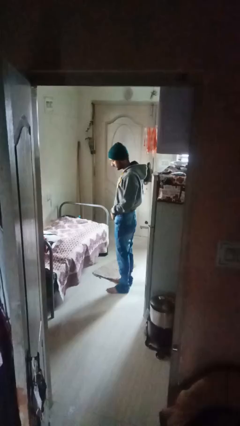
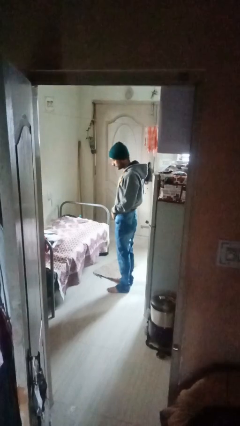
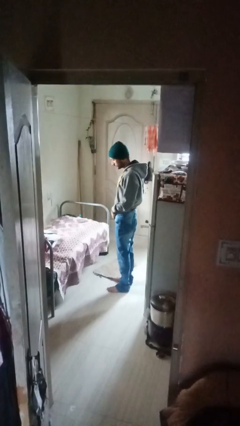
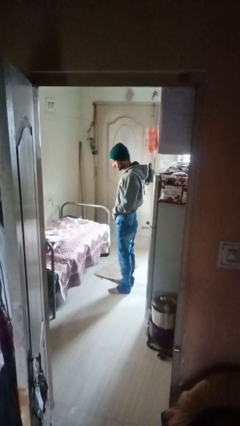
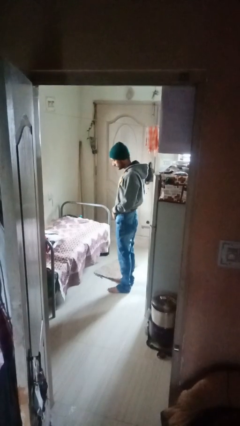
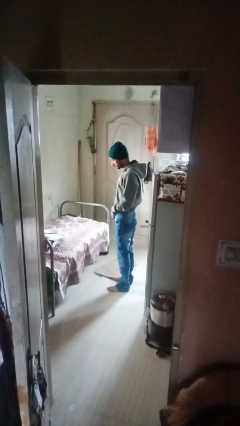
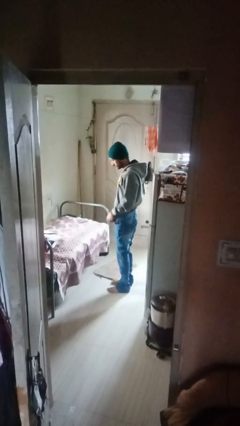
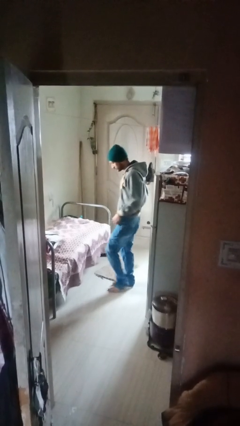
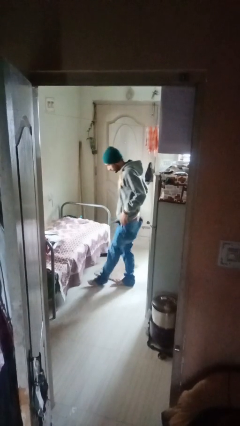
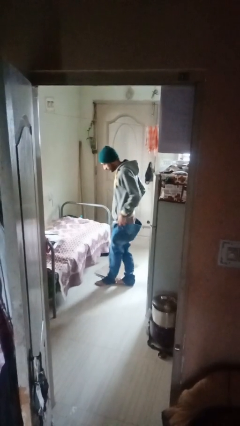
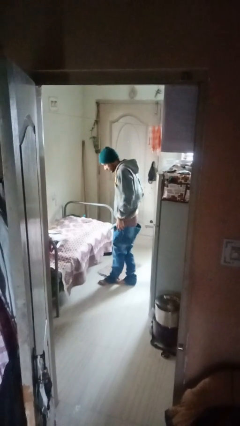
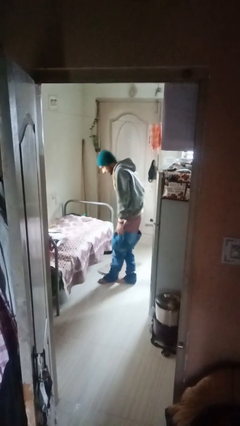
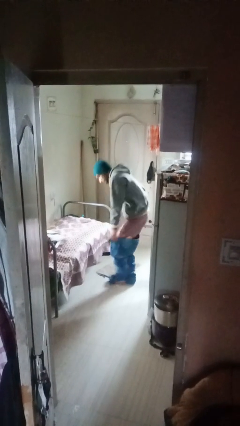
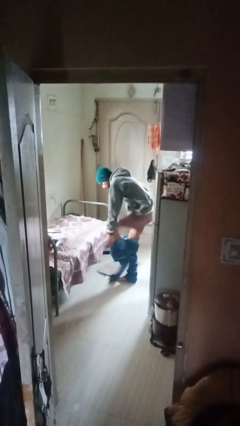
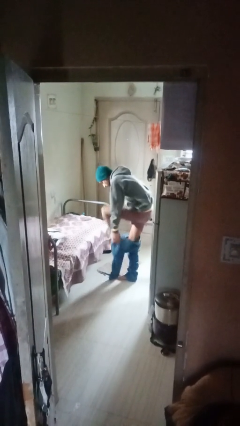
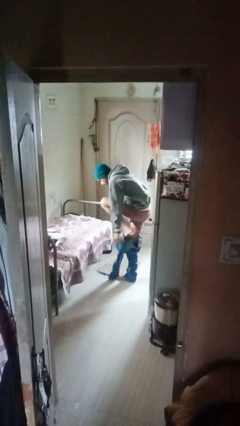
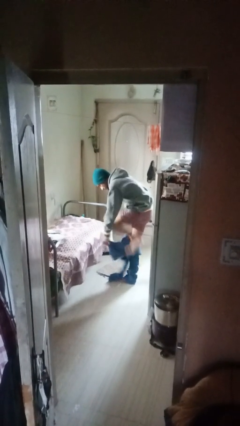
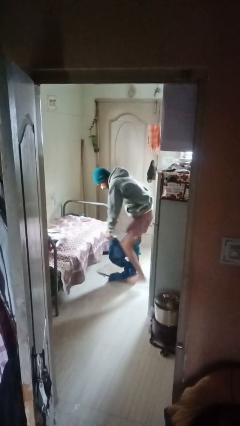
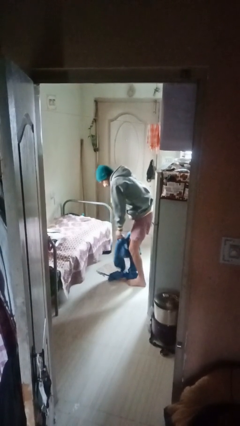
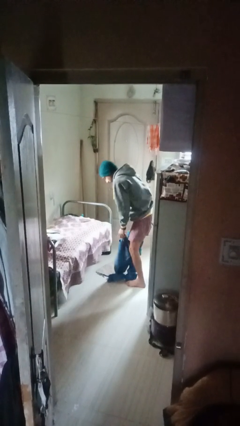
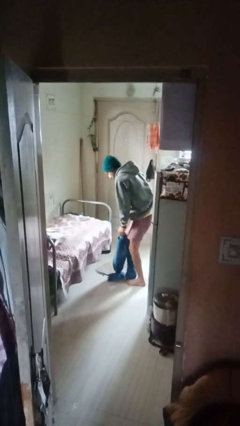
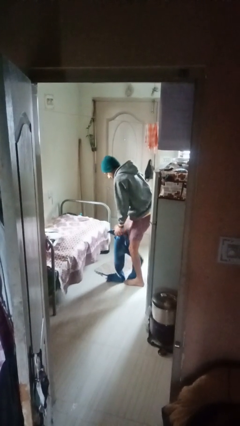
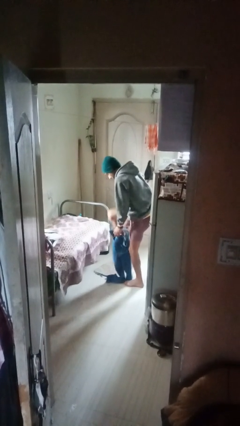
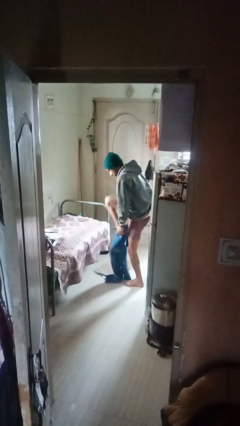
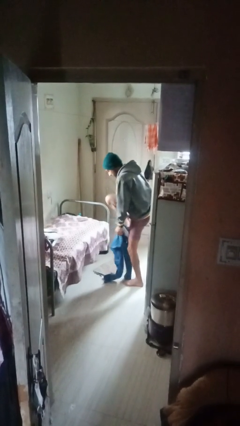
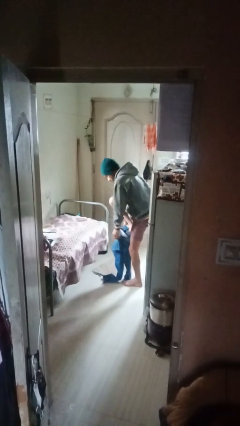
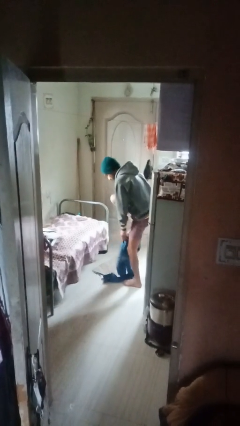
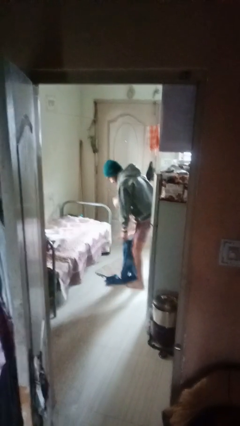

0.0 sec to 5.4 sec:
person takes off pants

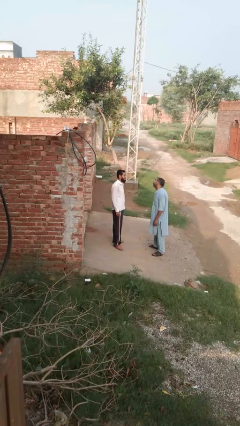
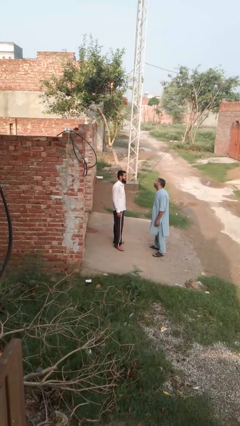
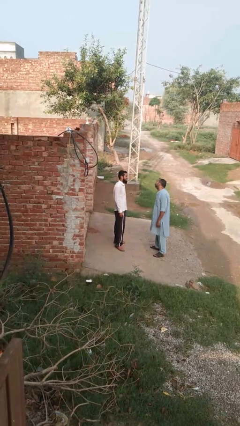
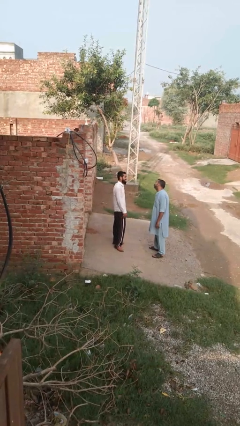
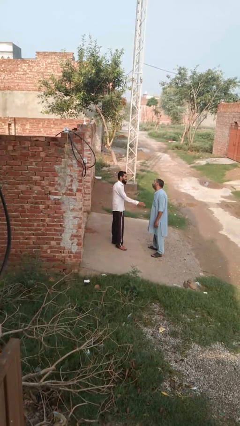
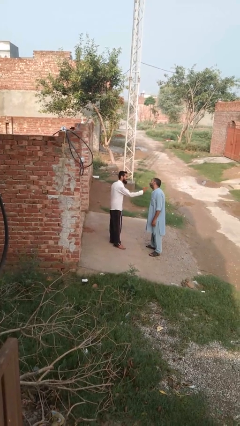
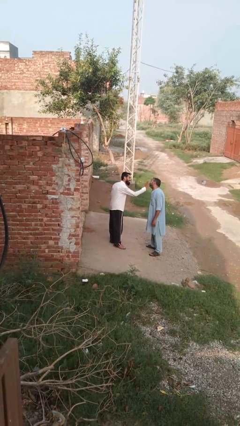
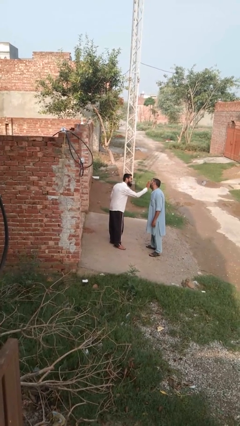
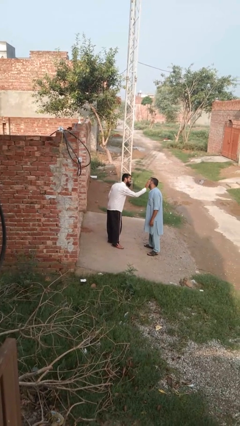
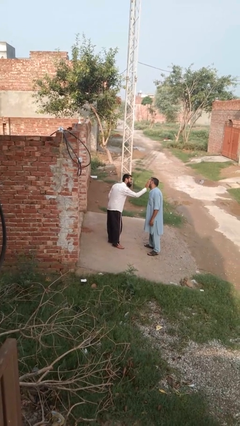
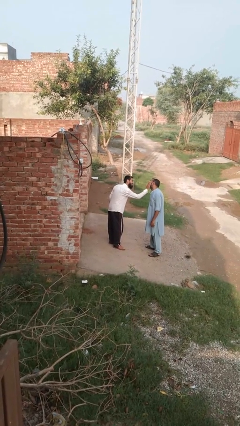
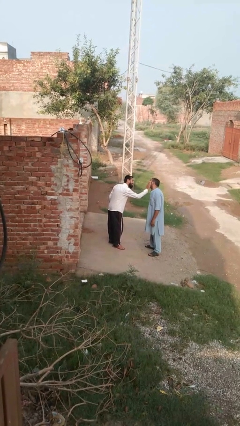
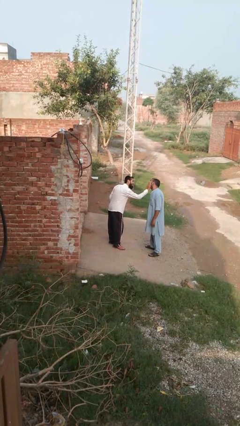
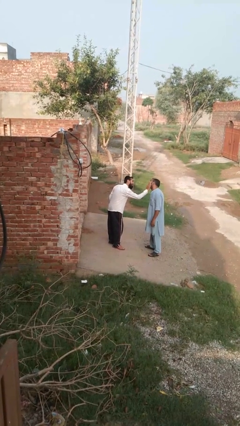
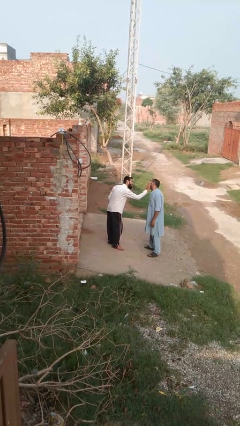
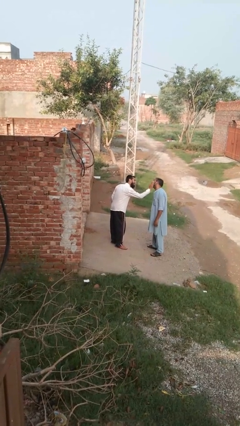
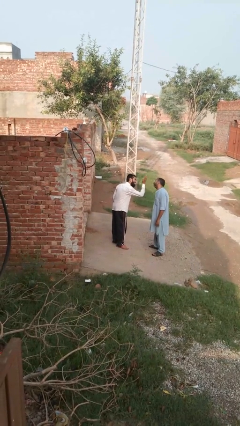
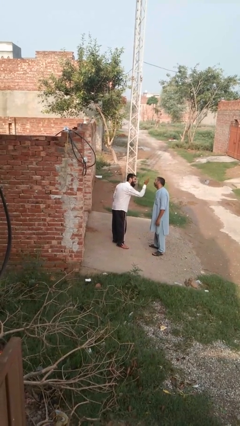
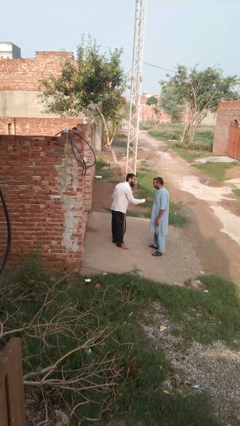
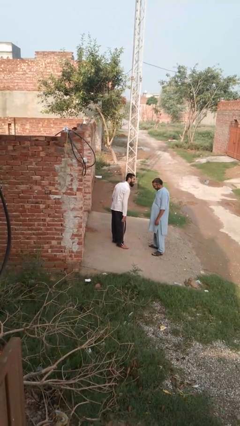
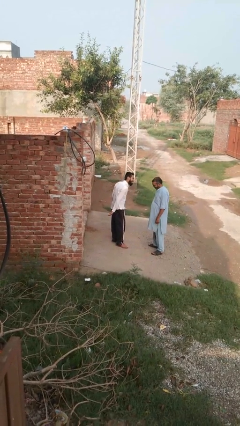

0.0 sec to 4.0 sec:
person touches face of person

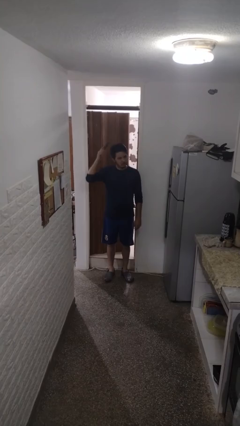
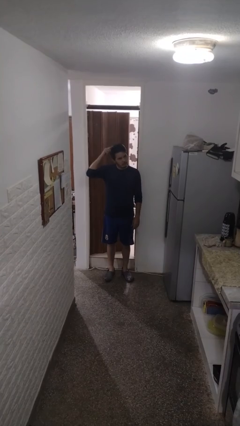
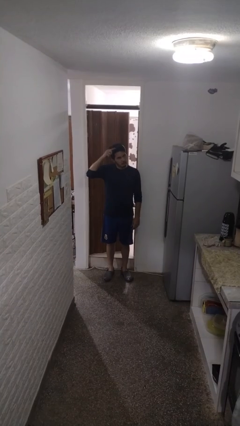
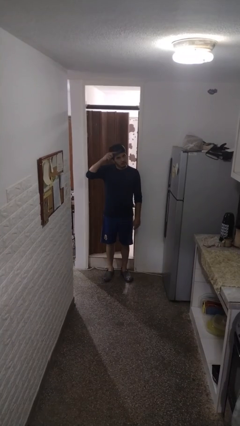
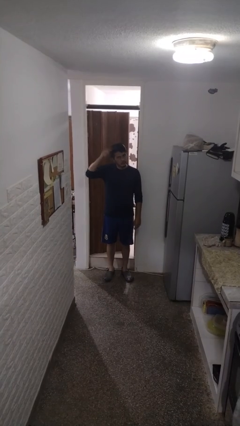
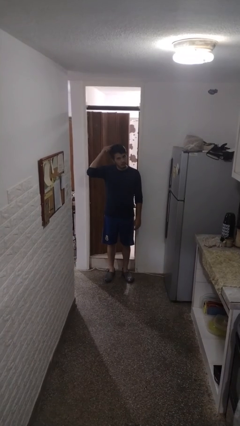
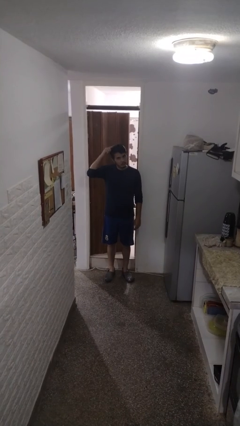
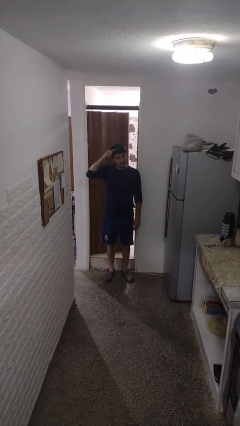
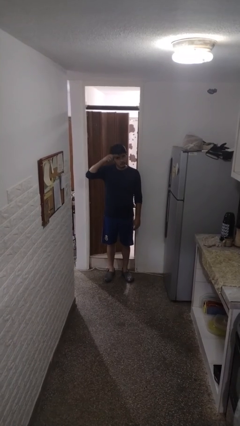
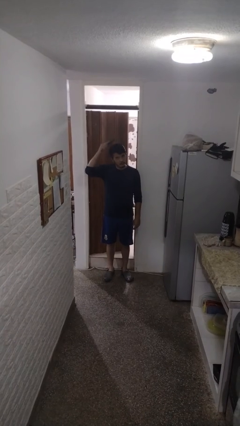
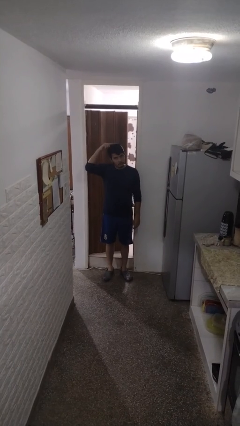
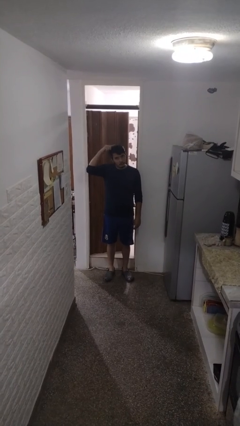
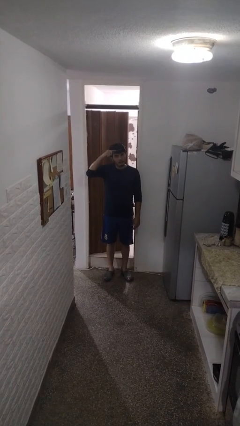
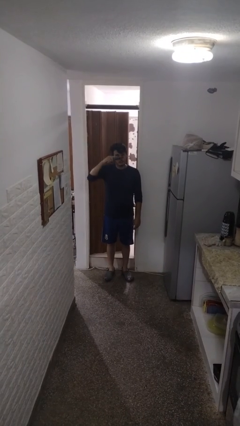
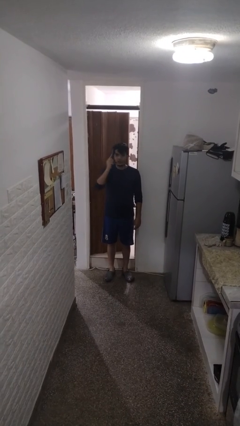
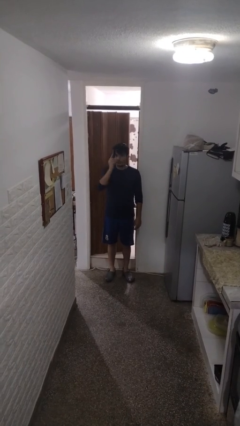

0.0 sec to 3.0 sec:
person brushes hair

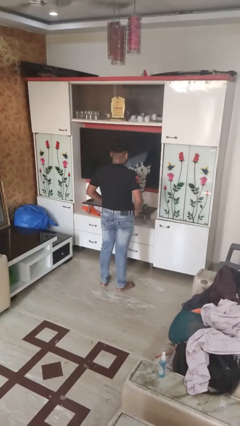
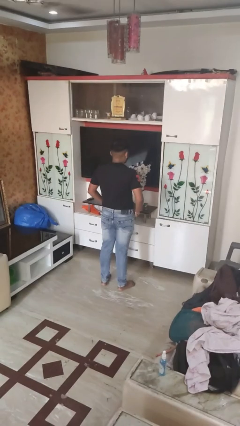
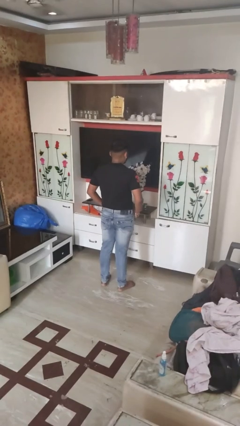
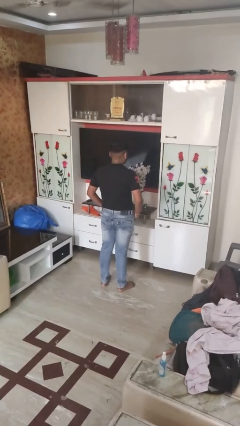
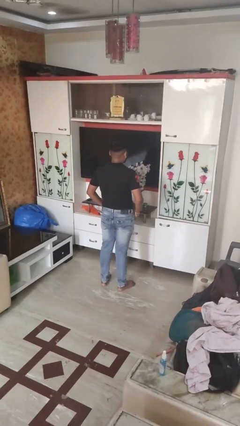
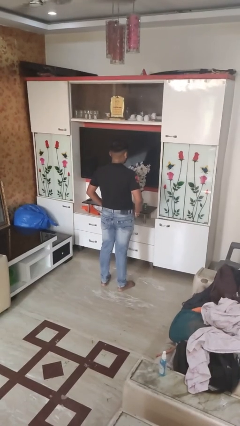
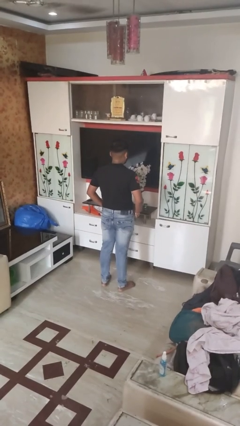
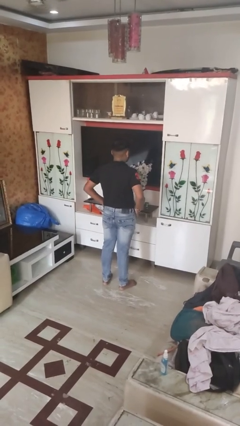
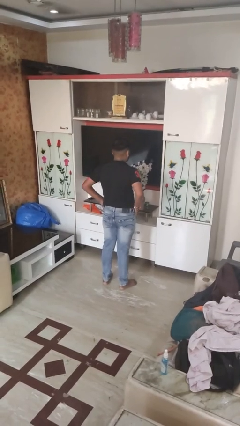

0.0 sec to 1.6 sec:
person puts hands in back pockets

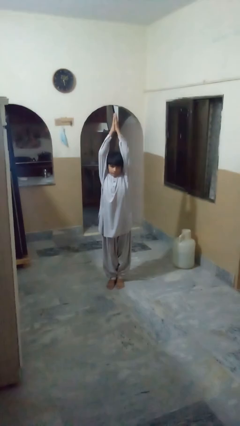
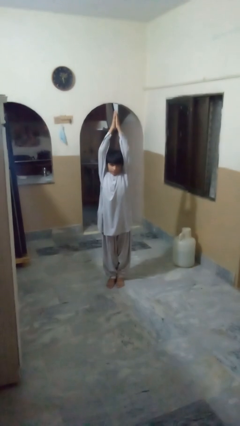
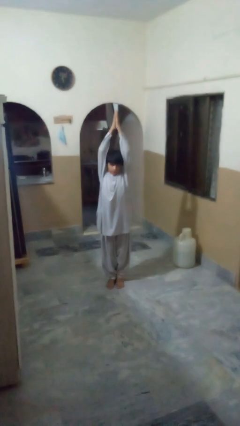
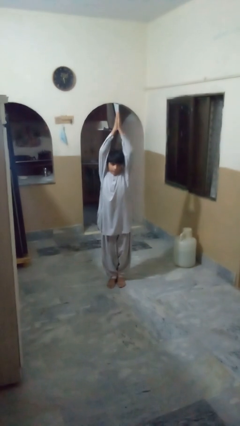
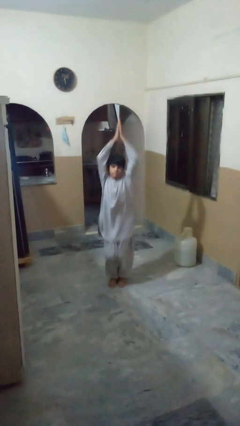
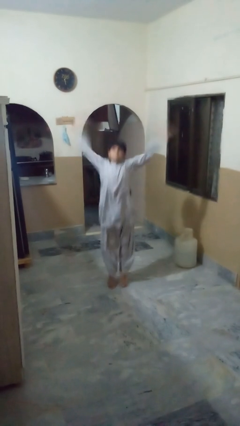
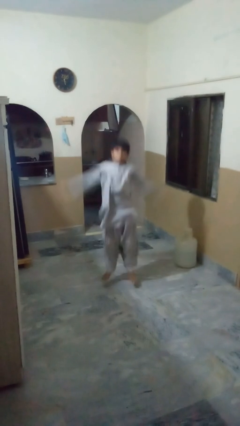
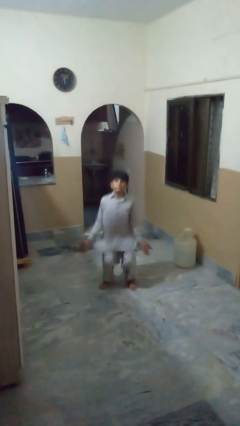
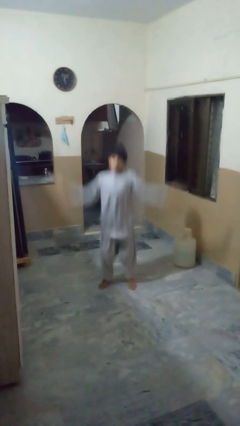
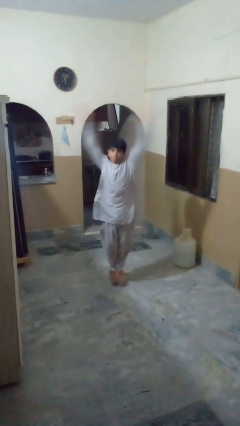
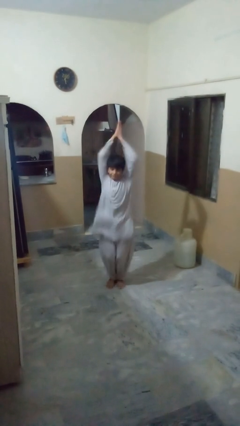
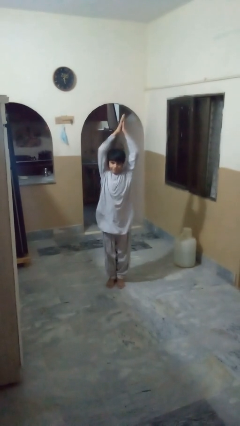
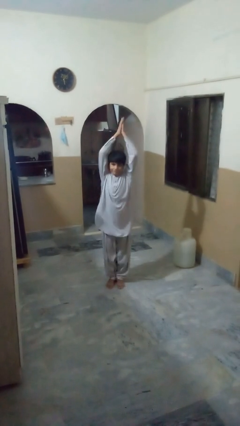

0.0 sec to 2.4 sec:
person exercises with jumping jacks

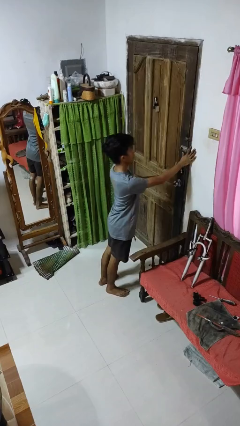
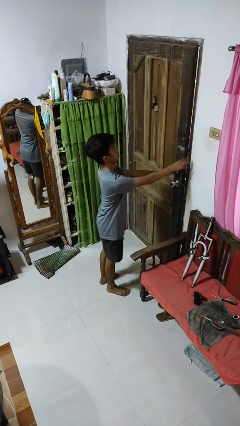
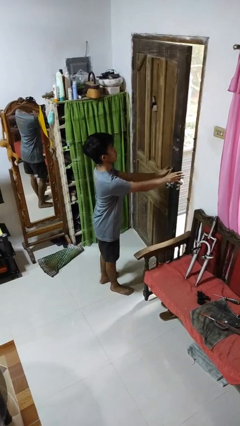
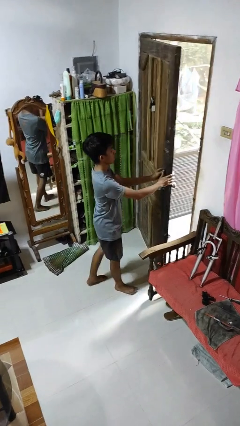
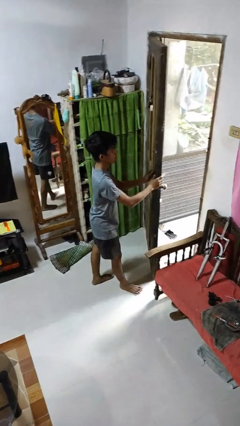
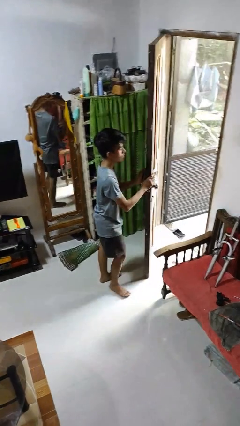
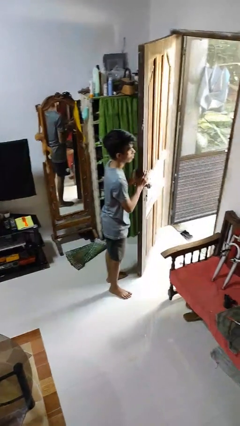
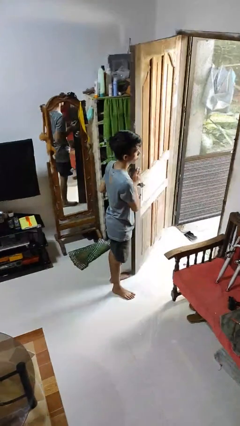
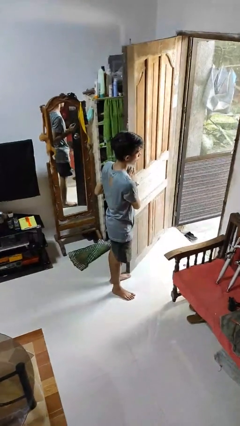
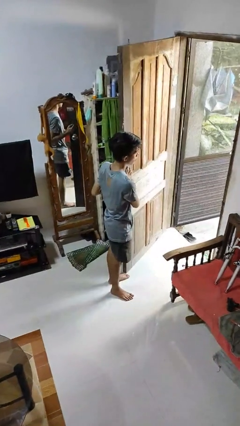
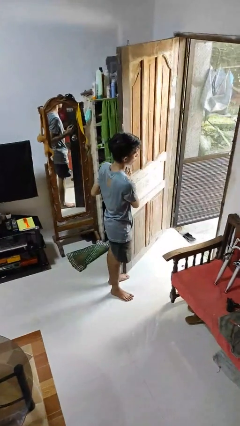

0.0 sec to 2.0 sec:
person opens facility door
